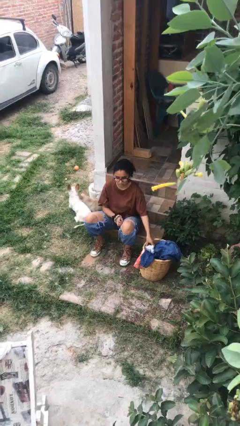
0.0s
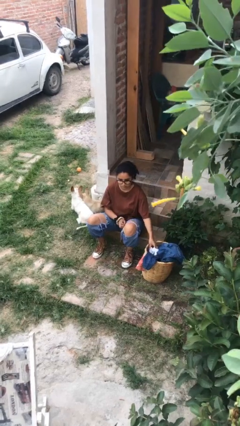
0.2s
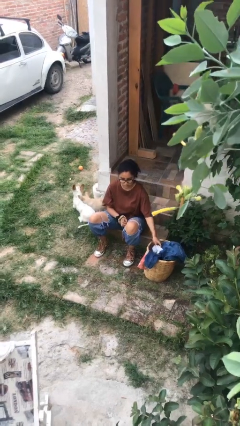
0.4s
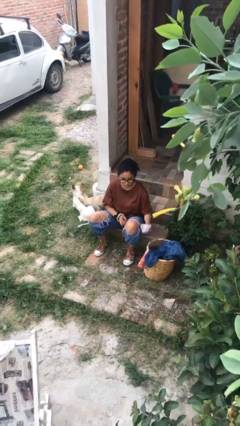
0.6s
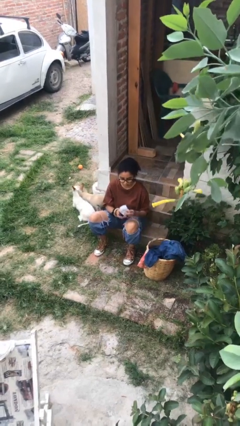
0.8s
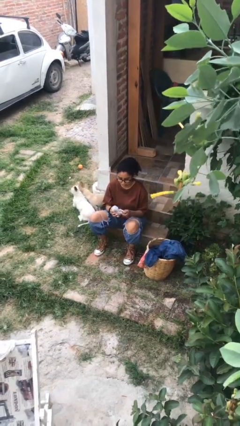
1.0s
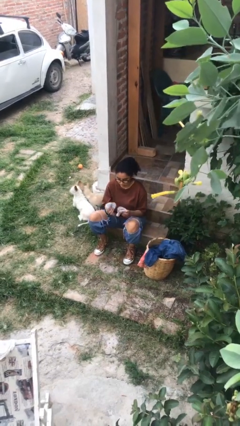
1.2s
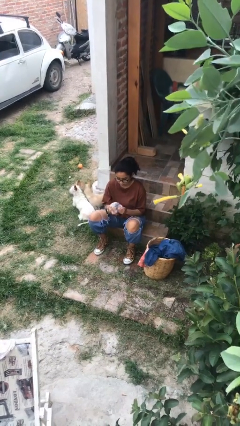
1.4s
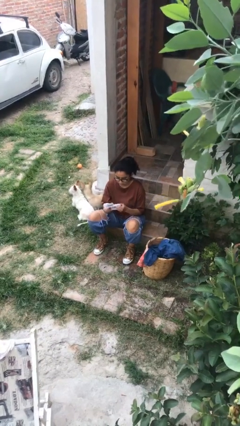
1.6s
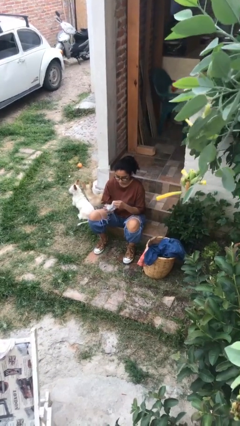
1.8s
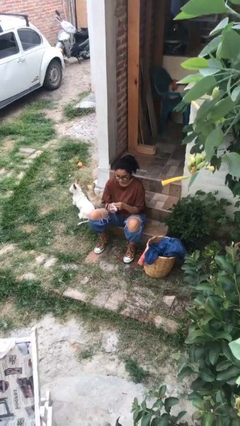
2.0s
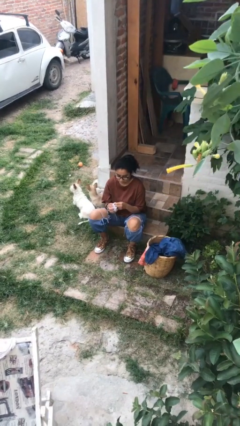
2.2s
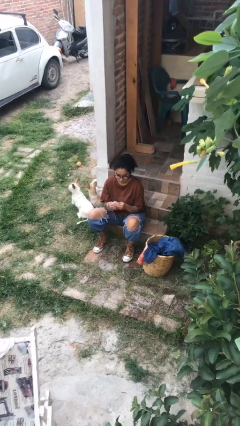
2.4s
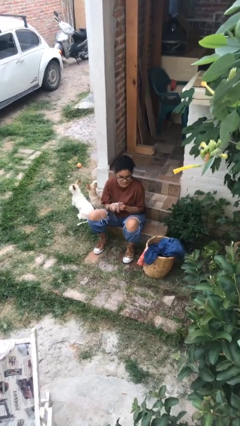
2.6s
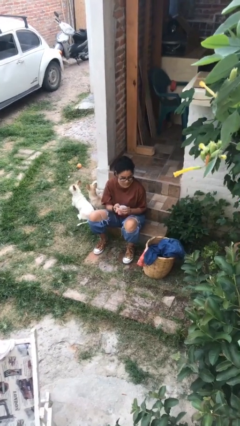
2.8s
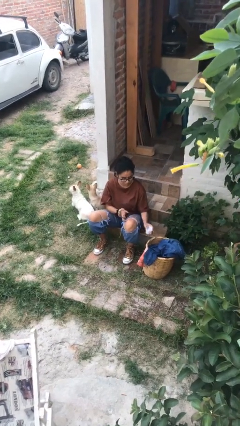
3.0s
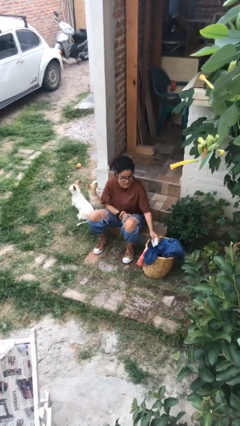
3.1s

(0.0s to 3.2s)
person folds socks

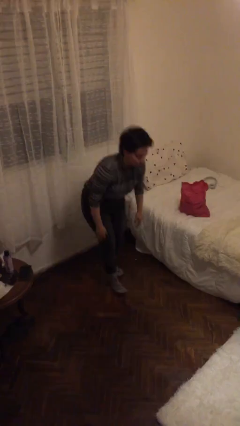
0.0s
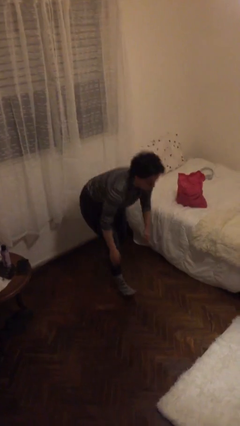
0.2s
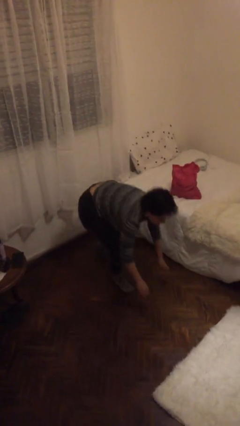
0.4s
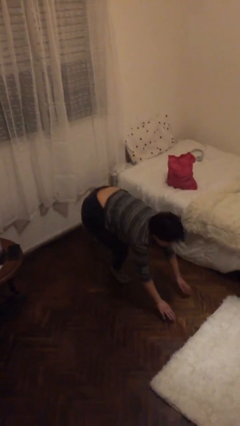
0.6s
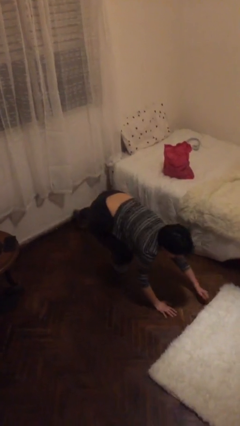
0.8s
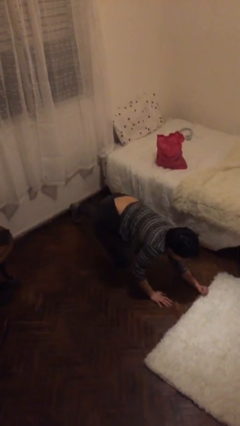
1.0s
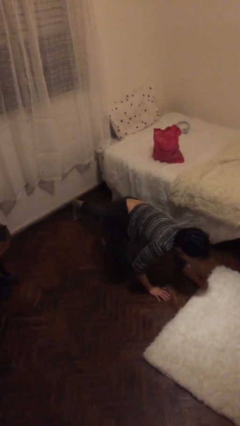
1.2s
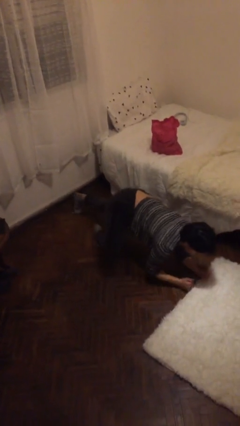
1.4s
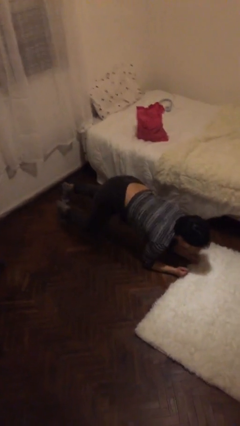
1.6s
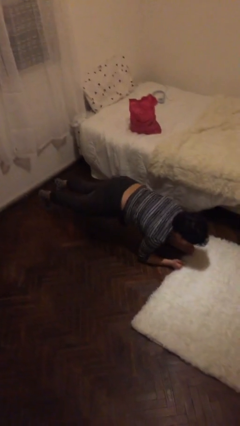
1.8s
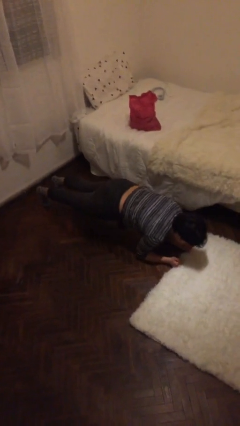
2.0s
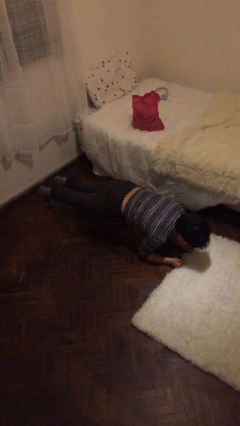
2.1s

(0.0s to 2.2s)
person exercises with plank

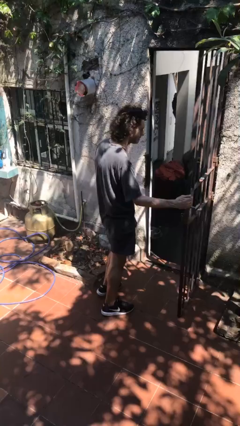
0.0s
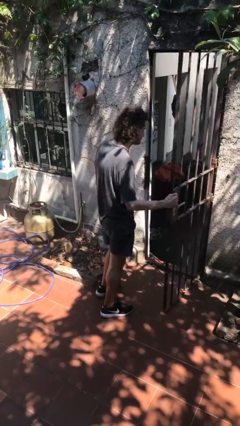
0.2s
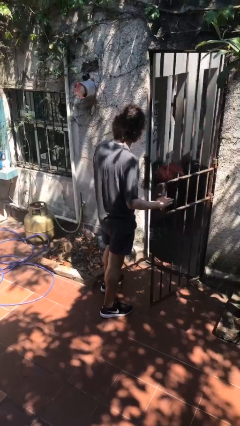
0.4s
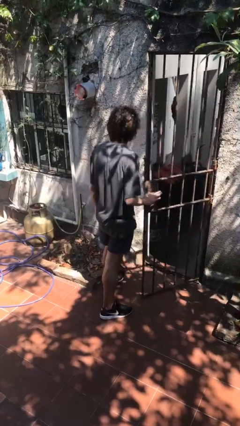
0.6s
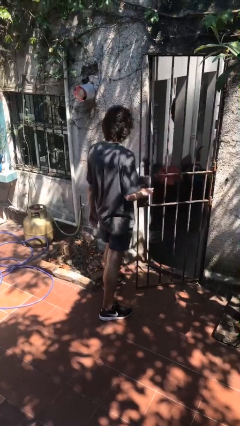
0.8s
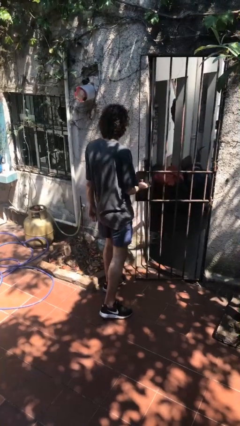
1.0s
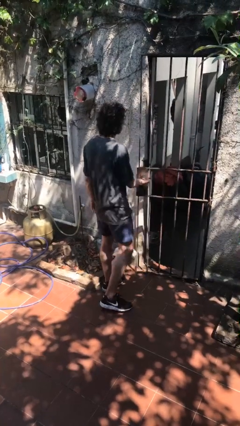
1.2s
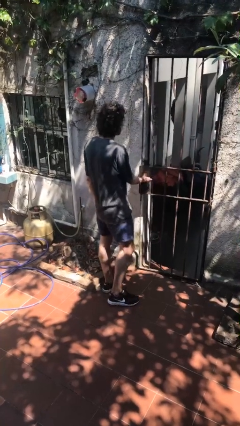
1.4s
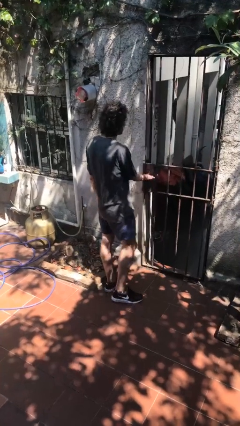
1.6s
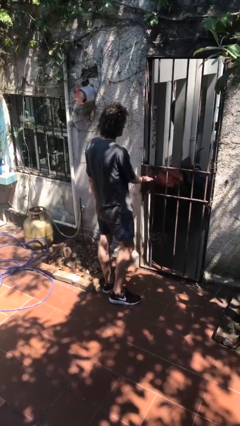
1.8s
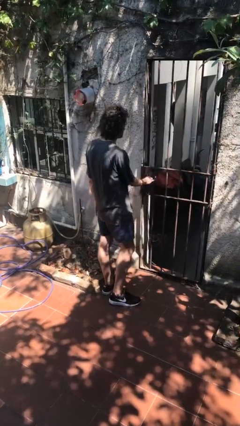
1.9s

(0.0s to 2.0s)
person closes facility door

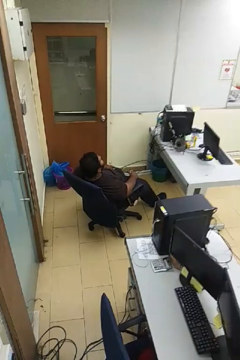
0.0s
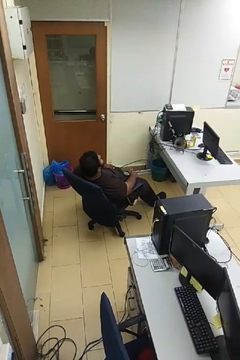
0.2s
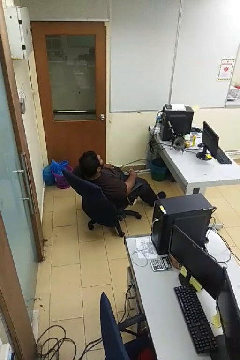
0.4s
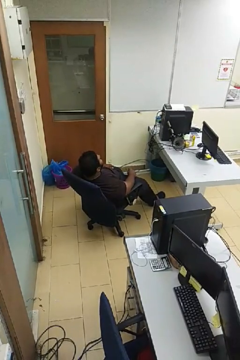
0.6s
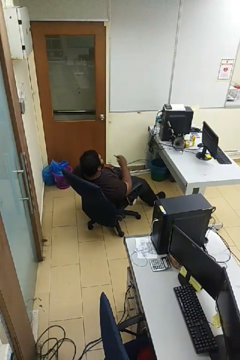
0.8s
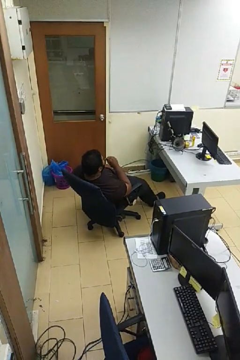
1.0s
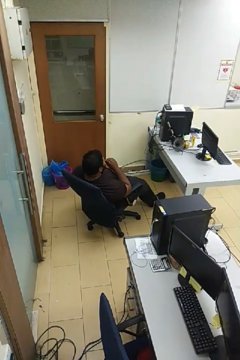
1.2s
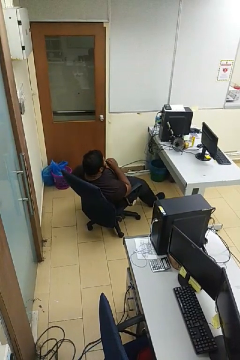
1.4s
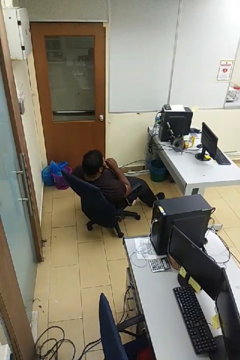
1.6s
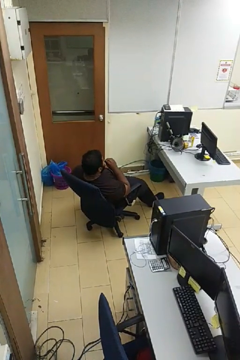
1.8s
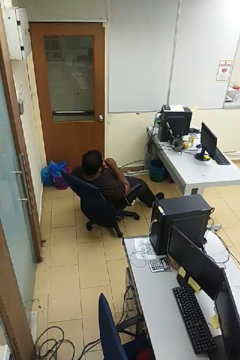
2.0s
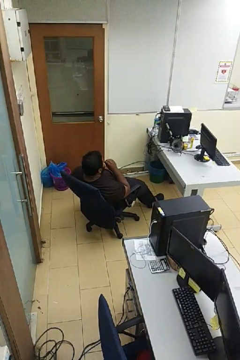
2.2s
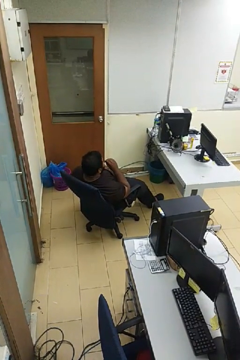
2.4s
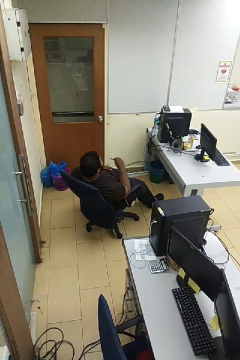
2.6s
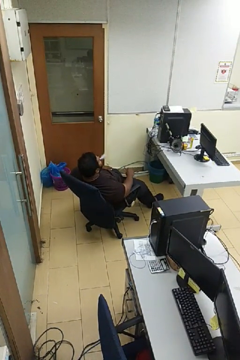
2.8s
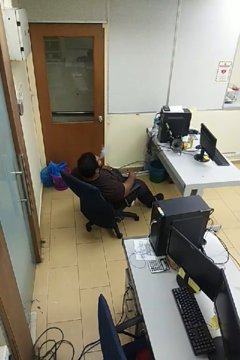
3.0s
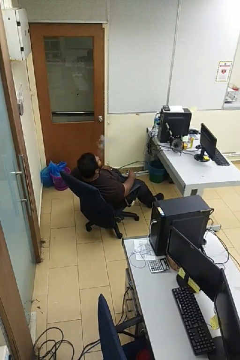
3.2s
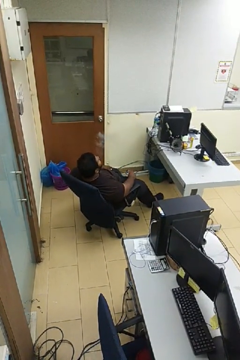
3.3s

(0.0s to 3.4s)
person vapes

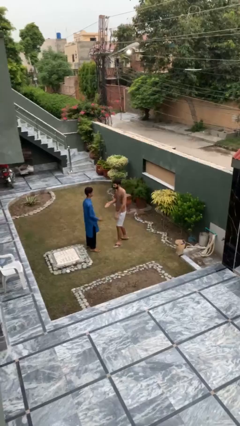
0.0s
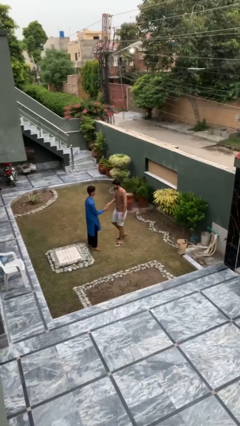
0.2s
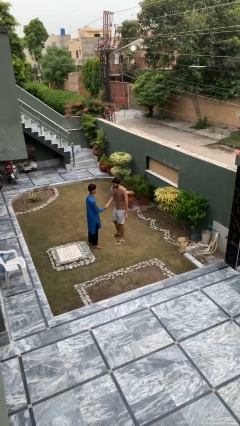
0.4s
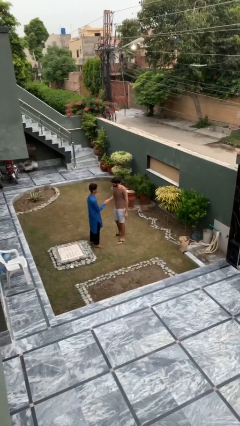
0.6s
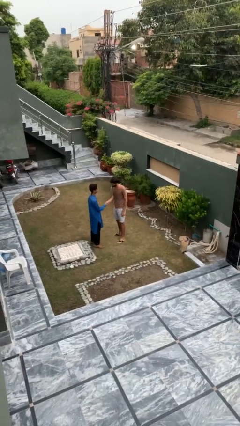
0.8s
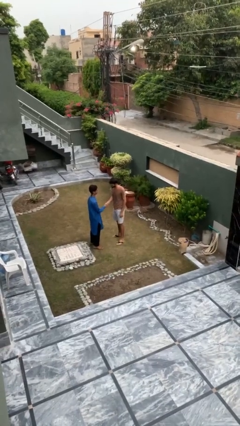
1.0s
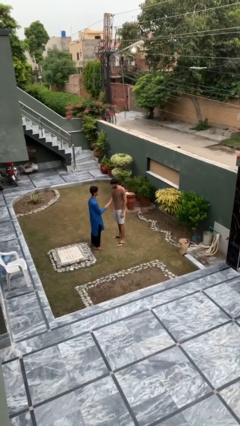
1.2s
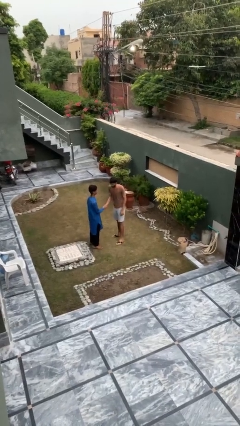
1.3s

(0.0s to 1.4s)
person shakes hand

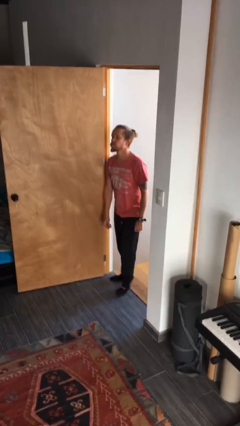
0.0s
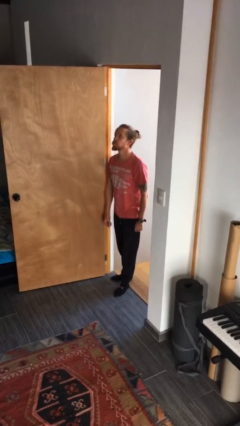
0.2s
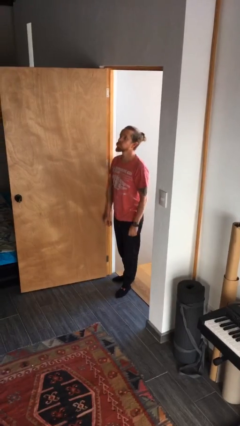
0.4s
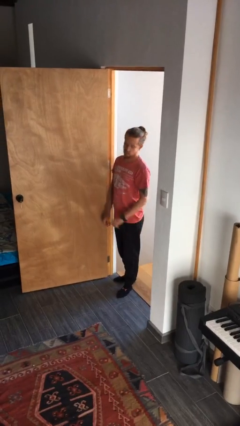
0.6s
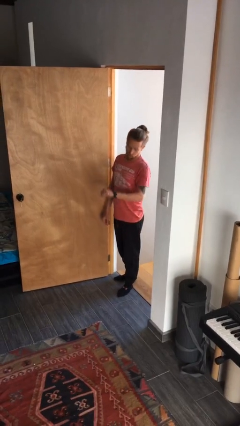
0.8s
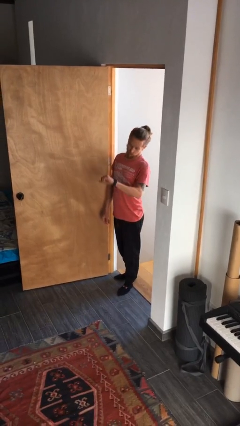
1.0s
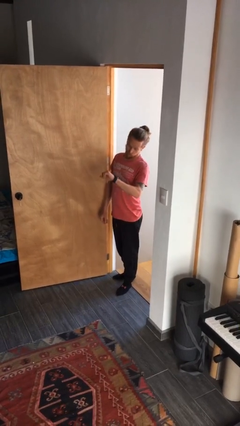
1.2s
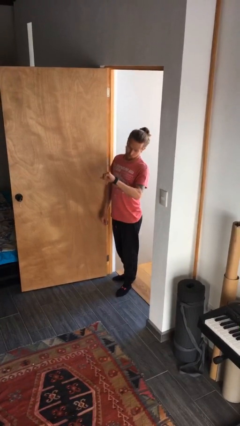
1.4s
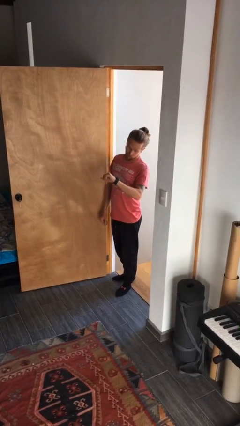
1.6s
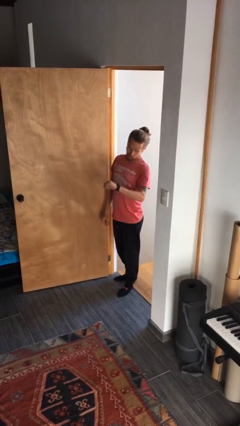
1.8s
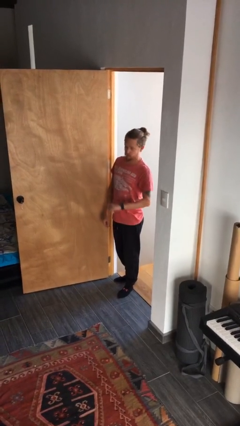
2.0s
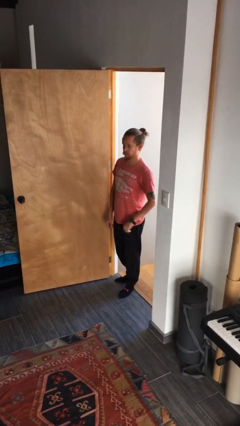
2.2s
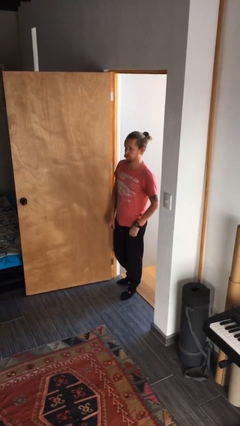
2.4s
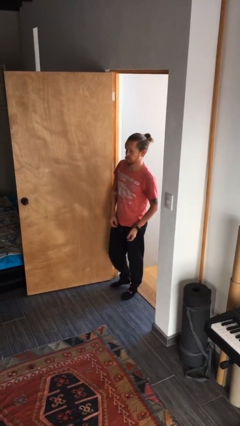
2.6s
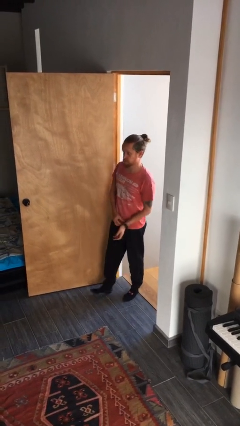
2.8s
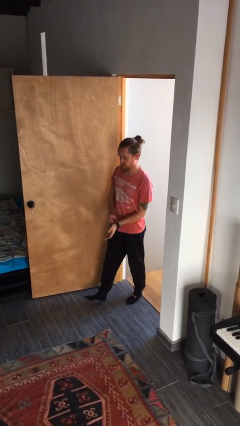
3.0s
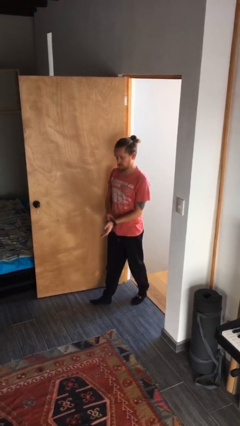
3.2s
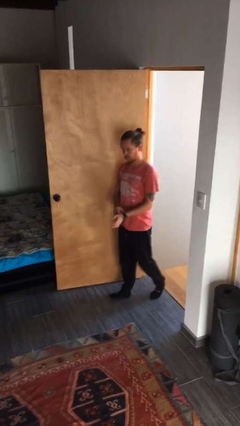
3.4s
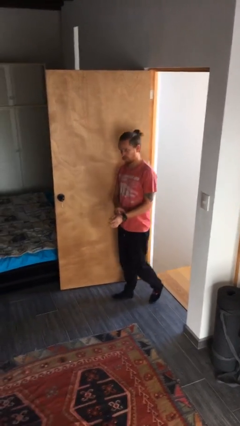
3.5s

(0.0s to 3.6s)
person looks at wristwatch
